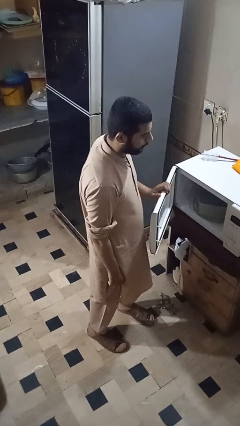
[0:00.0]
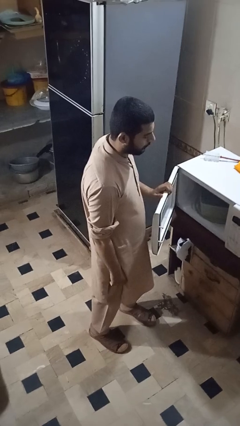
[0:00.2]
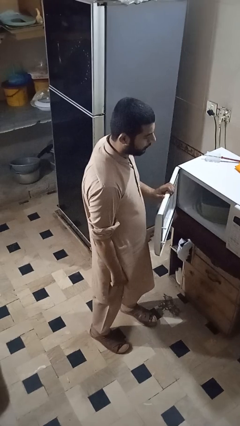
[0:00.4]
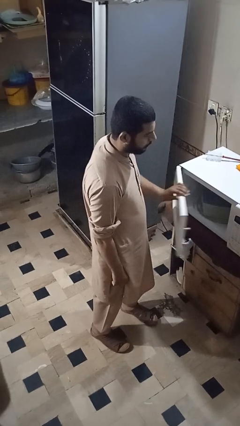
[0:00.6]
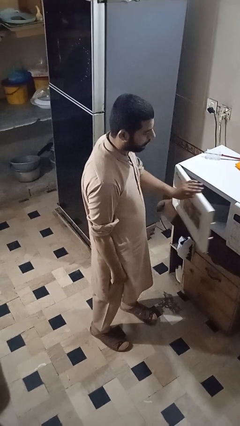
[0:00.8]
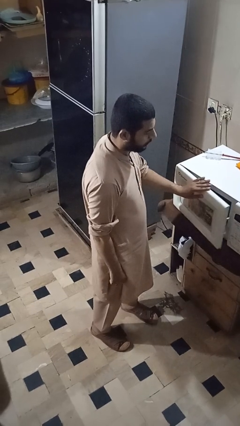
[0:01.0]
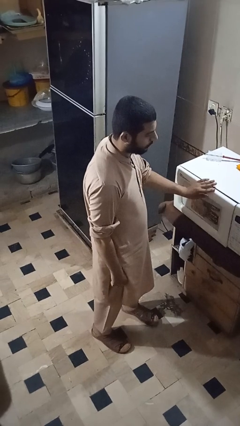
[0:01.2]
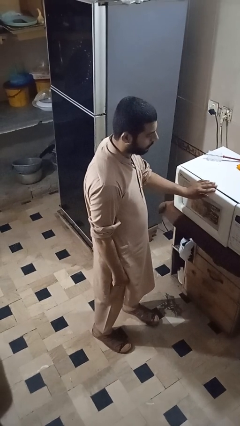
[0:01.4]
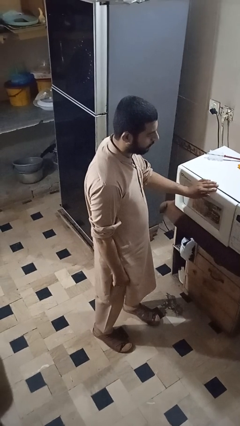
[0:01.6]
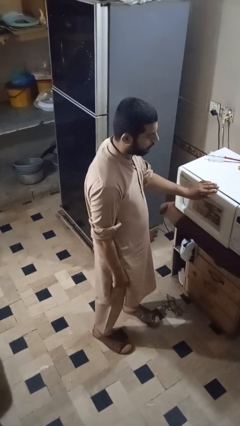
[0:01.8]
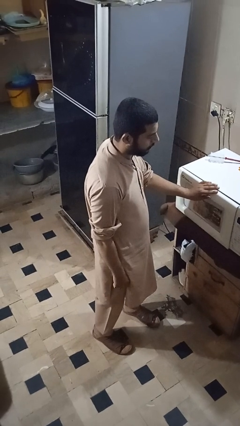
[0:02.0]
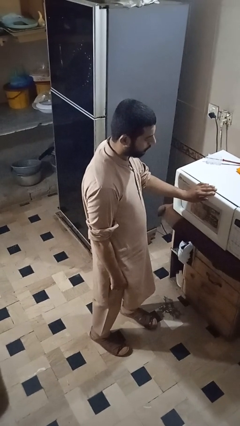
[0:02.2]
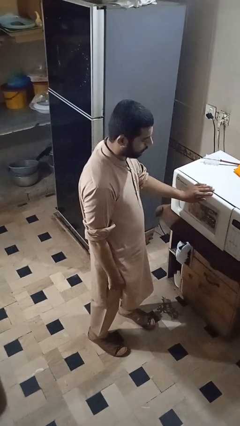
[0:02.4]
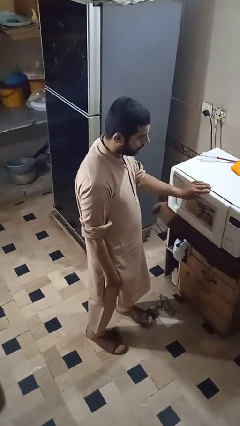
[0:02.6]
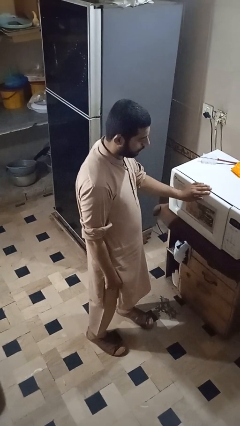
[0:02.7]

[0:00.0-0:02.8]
person closes microwave

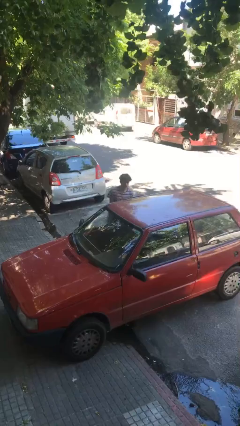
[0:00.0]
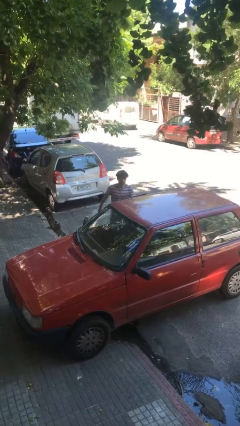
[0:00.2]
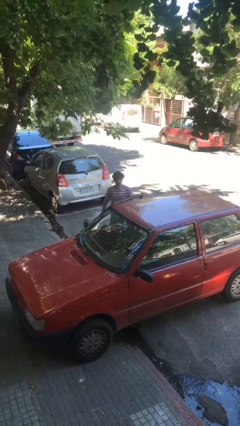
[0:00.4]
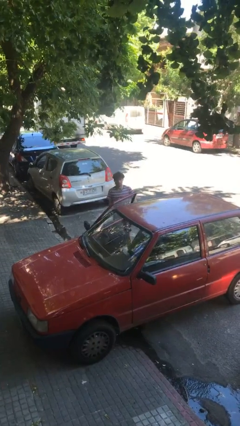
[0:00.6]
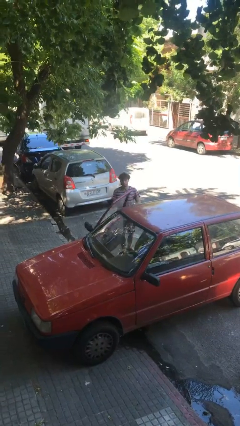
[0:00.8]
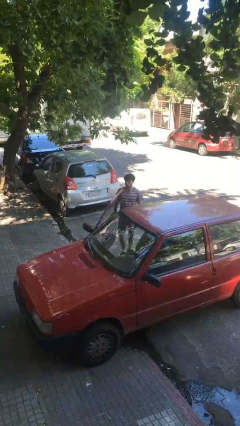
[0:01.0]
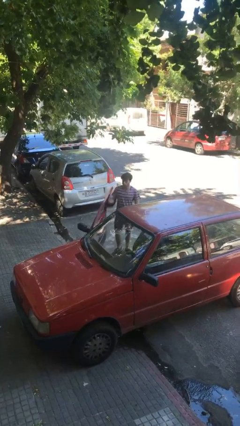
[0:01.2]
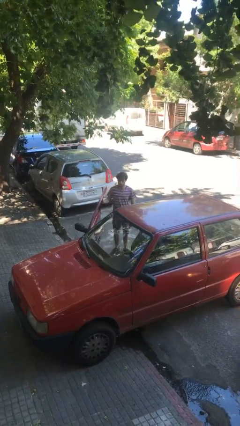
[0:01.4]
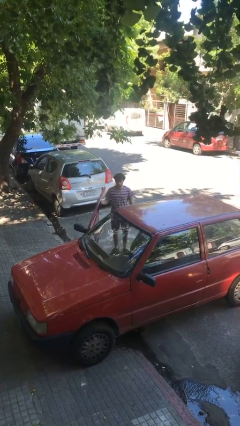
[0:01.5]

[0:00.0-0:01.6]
person opens car door

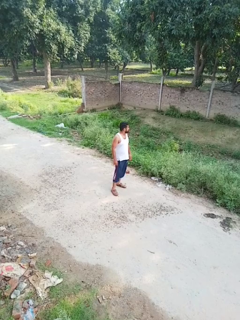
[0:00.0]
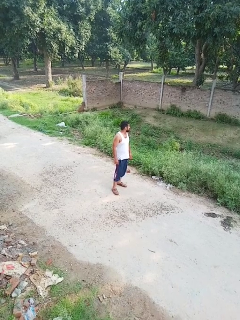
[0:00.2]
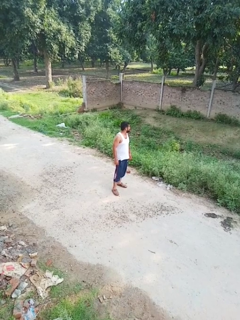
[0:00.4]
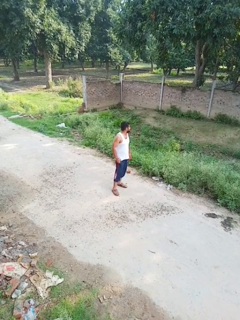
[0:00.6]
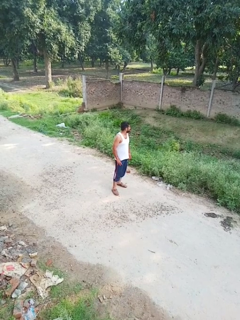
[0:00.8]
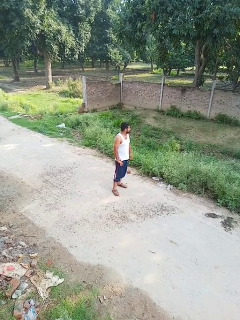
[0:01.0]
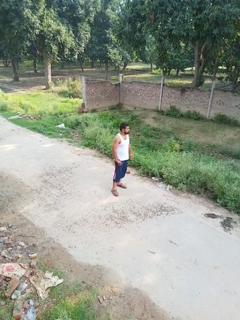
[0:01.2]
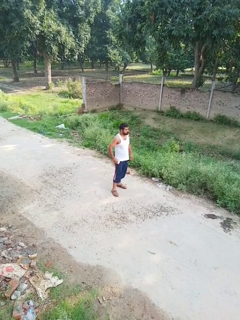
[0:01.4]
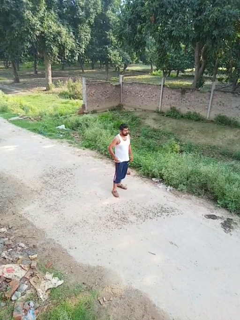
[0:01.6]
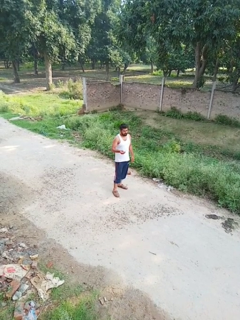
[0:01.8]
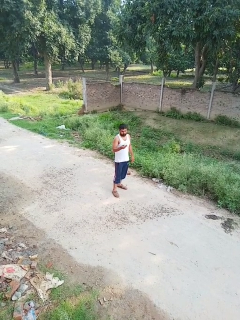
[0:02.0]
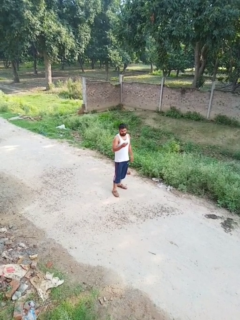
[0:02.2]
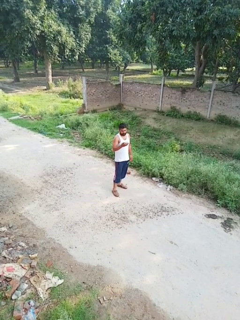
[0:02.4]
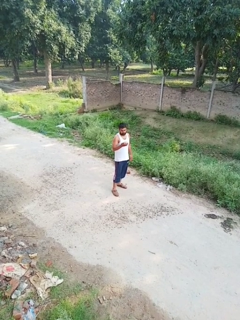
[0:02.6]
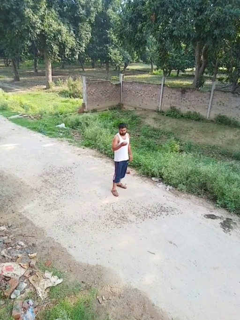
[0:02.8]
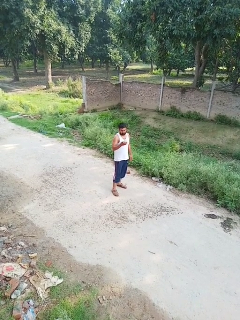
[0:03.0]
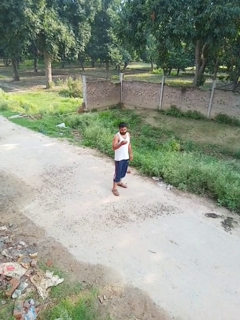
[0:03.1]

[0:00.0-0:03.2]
person takes phone from pocket

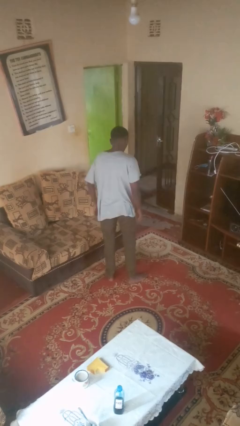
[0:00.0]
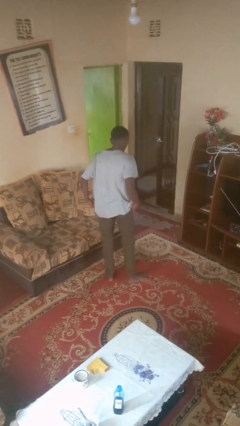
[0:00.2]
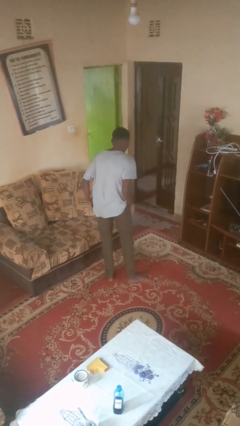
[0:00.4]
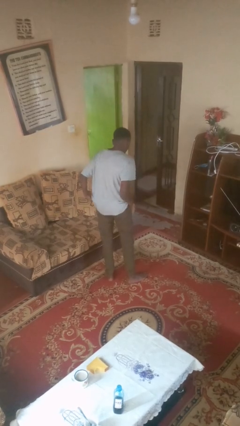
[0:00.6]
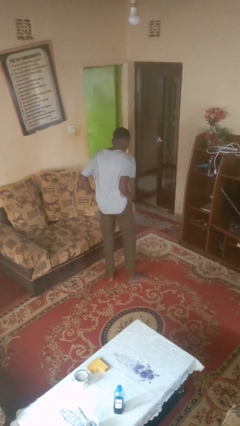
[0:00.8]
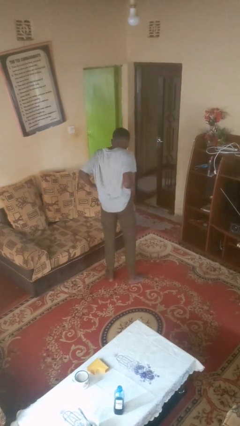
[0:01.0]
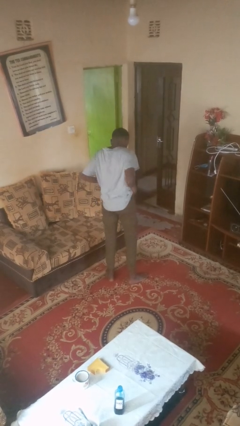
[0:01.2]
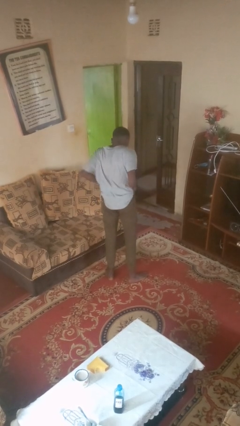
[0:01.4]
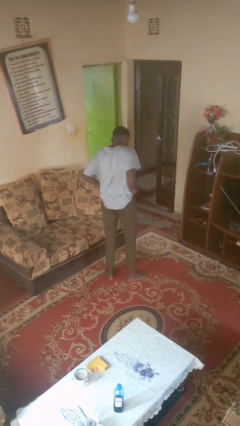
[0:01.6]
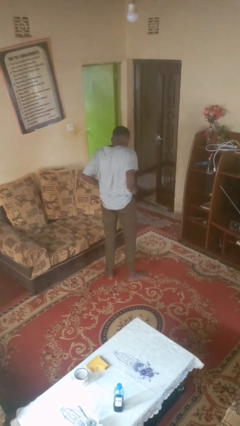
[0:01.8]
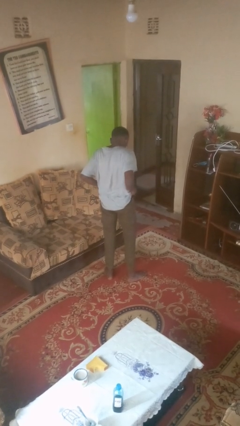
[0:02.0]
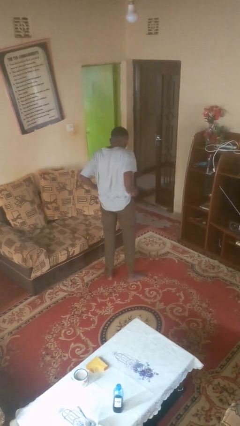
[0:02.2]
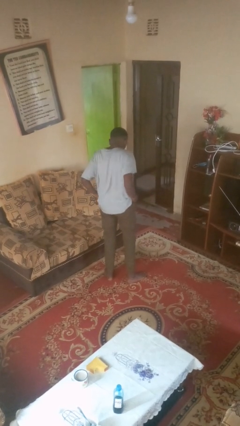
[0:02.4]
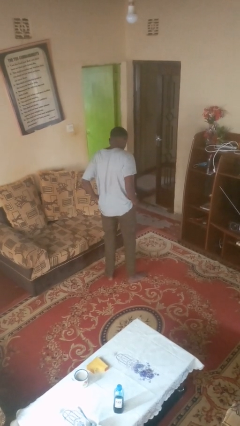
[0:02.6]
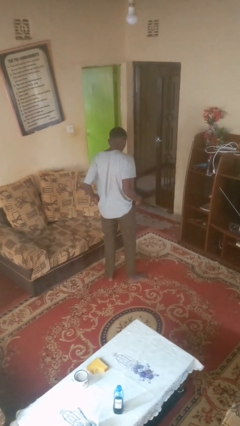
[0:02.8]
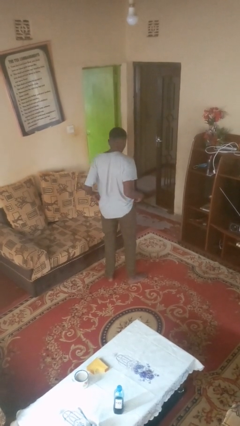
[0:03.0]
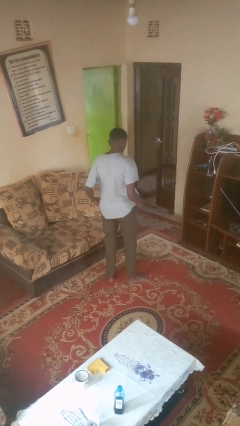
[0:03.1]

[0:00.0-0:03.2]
person washes dish

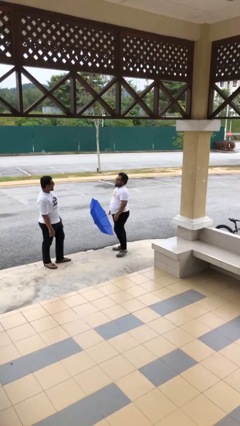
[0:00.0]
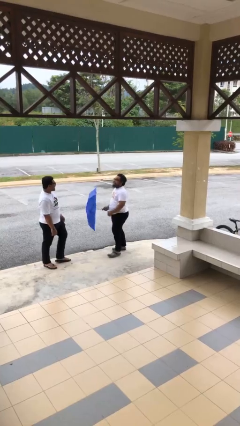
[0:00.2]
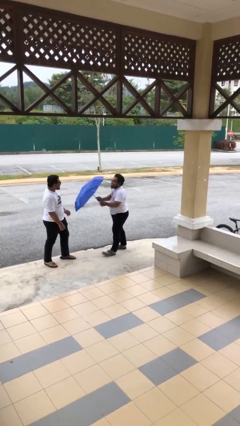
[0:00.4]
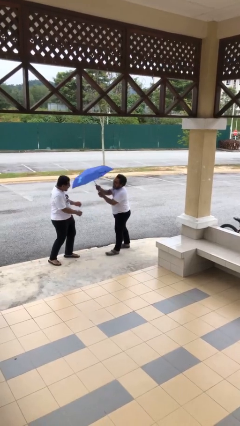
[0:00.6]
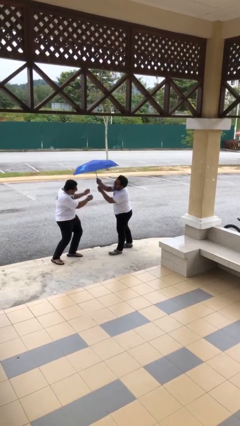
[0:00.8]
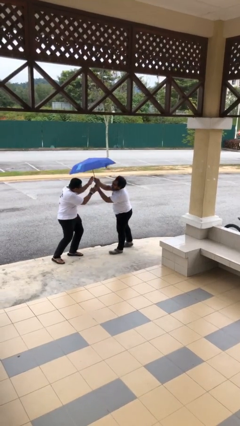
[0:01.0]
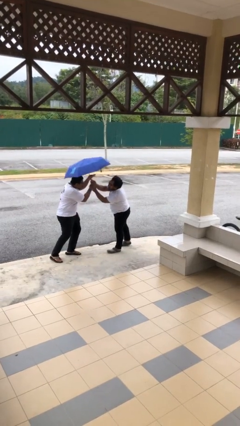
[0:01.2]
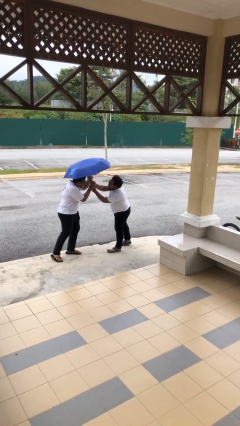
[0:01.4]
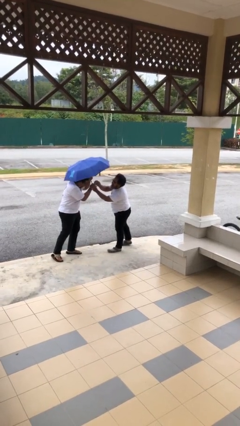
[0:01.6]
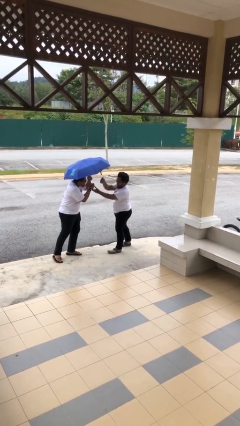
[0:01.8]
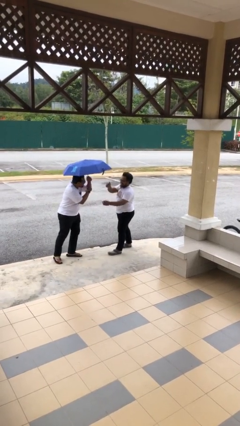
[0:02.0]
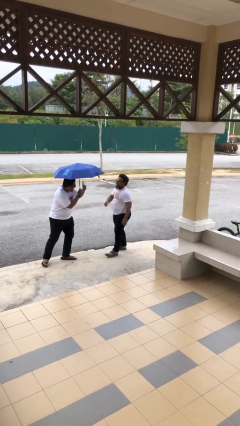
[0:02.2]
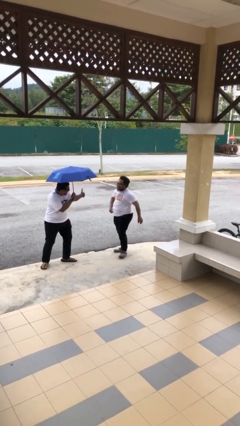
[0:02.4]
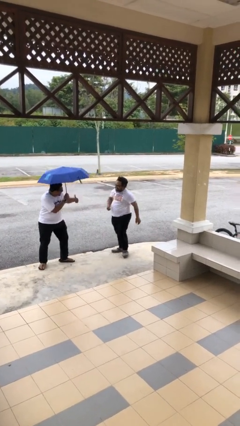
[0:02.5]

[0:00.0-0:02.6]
person transfers object to person

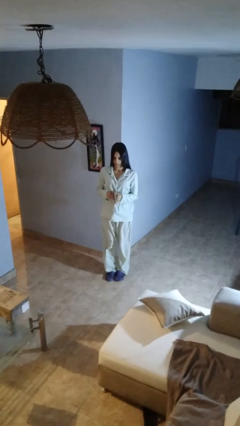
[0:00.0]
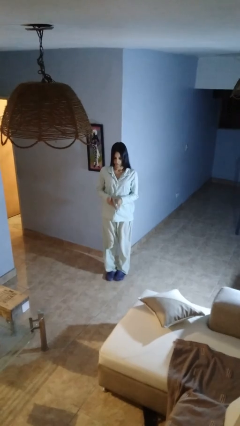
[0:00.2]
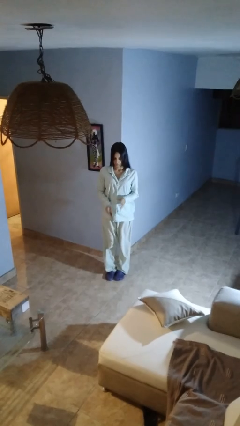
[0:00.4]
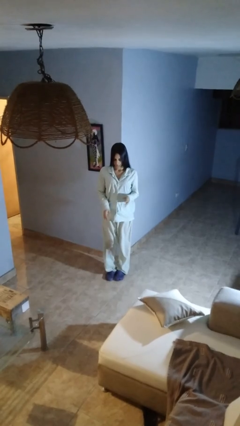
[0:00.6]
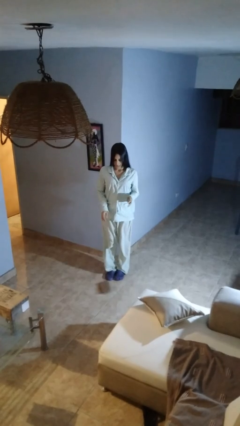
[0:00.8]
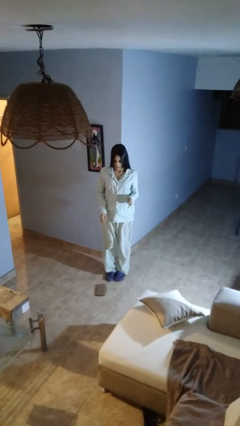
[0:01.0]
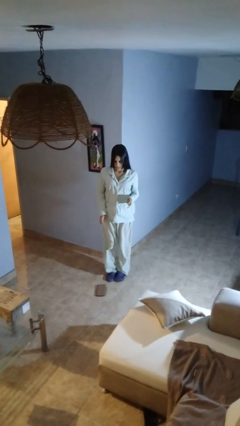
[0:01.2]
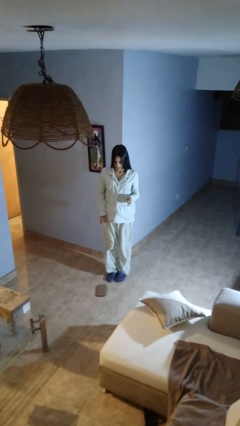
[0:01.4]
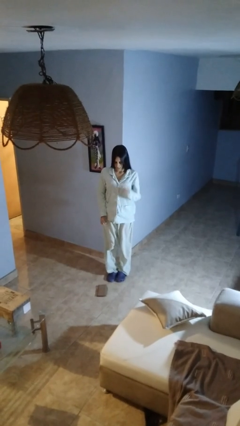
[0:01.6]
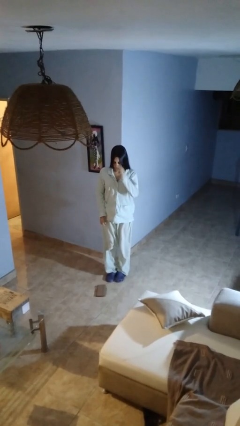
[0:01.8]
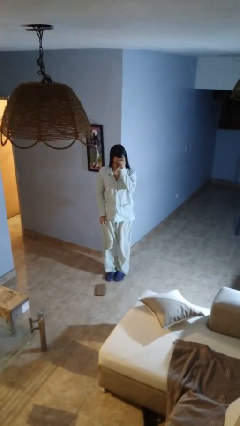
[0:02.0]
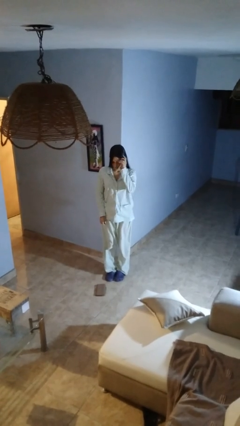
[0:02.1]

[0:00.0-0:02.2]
person drops object

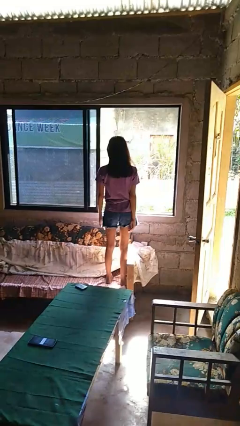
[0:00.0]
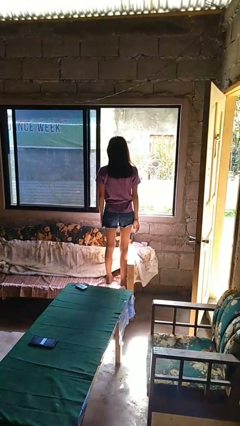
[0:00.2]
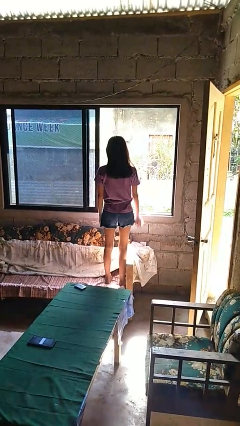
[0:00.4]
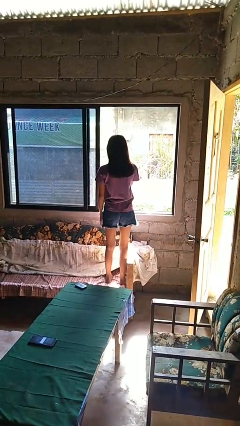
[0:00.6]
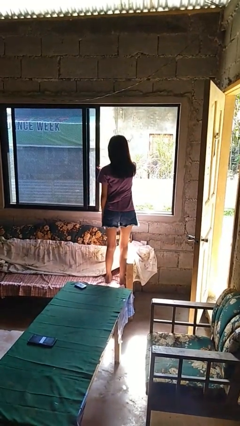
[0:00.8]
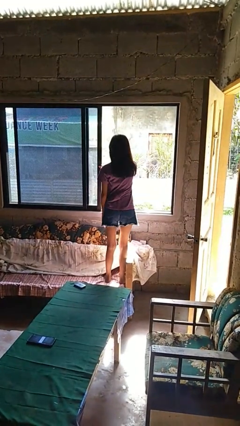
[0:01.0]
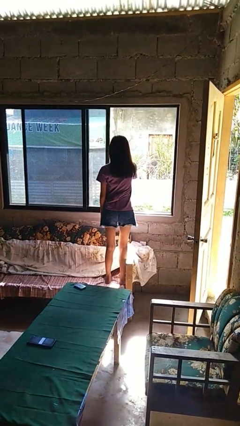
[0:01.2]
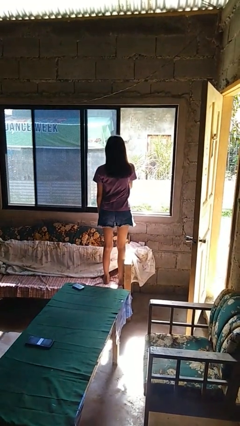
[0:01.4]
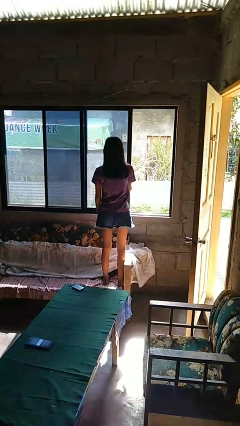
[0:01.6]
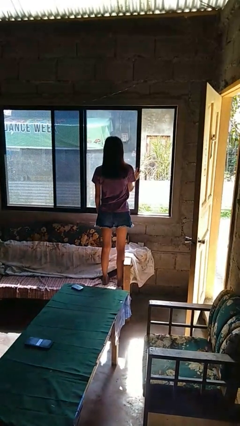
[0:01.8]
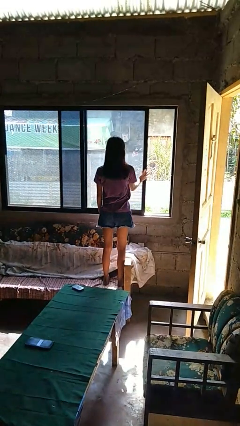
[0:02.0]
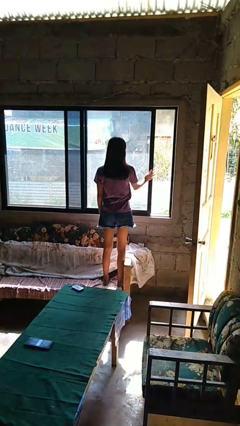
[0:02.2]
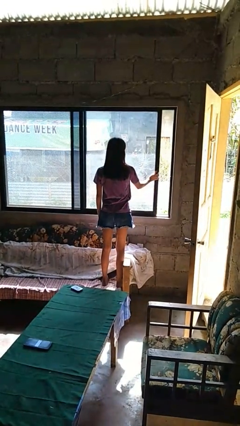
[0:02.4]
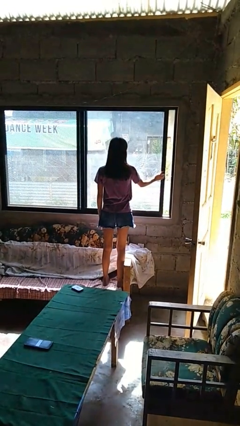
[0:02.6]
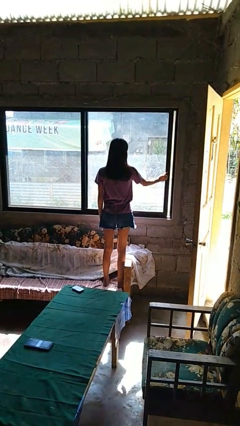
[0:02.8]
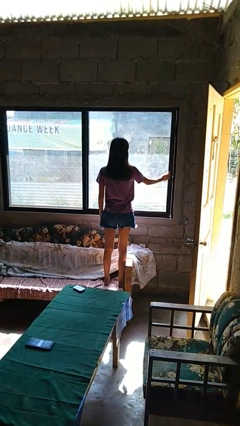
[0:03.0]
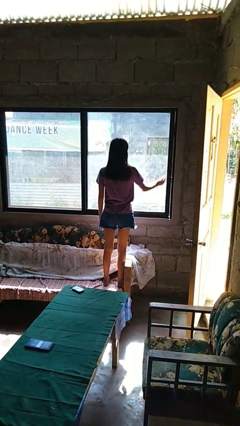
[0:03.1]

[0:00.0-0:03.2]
person closes home window
